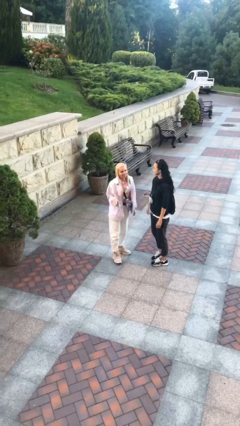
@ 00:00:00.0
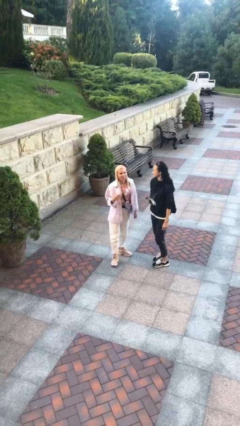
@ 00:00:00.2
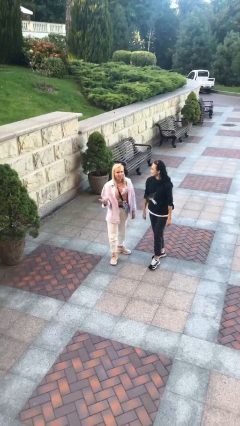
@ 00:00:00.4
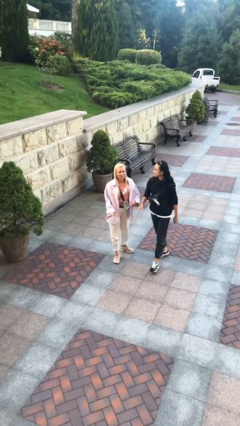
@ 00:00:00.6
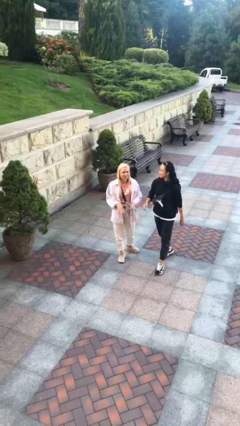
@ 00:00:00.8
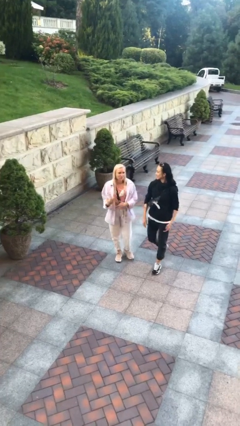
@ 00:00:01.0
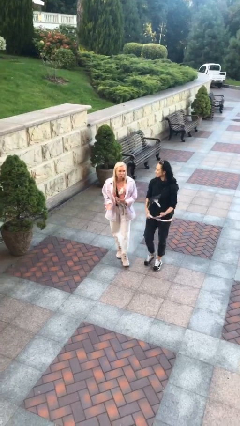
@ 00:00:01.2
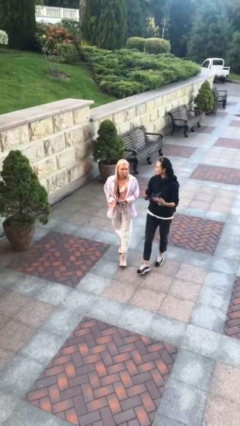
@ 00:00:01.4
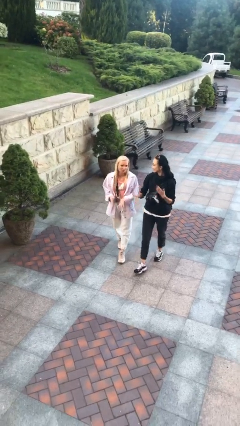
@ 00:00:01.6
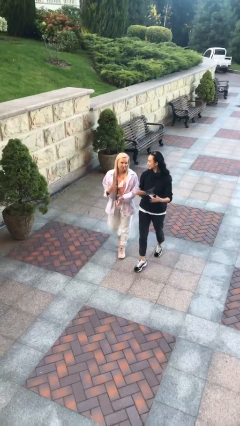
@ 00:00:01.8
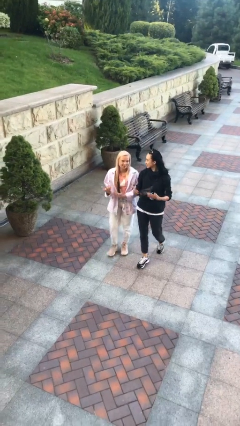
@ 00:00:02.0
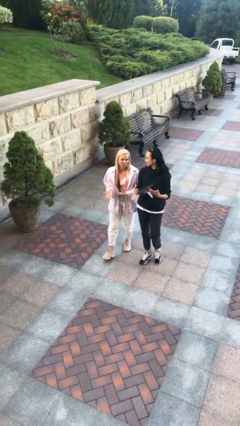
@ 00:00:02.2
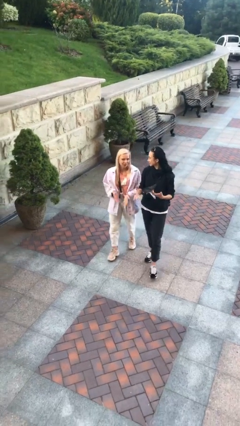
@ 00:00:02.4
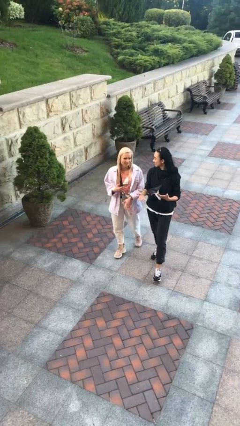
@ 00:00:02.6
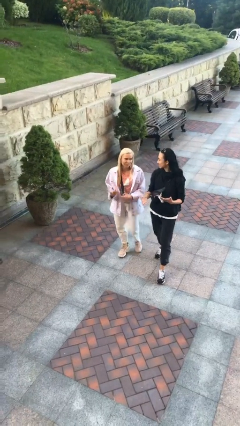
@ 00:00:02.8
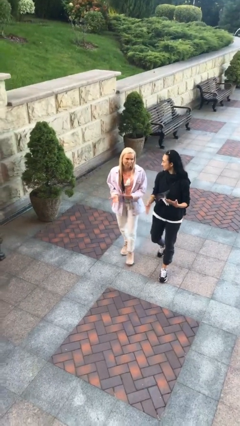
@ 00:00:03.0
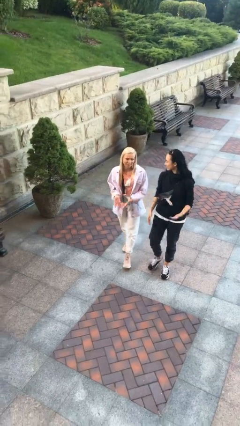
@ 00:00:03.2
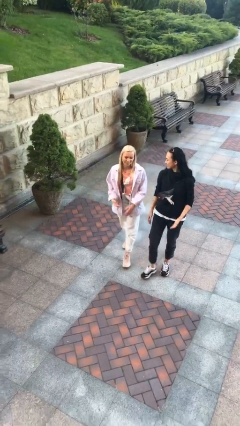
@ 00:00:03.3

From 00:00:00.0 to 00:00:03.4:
person talks to person

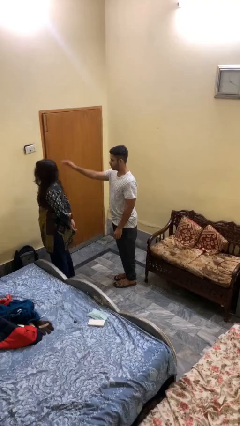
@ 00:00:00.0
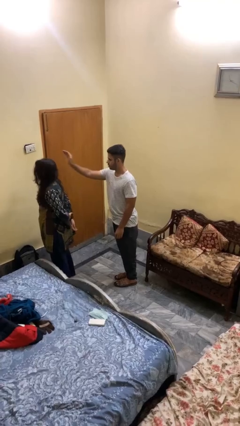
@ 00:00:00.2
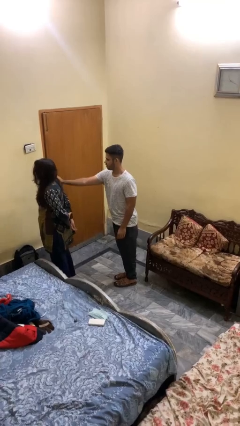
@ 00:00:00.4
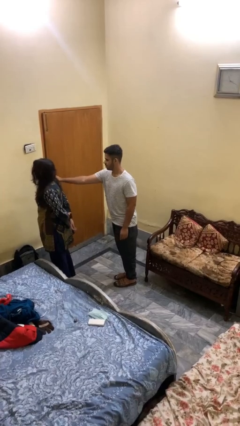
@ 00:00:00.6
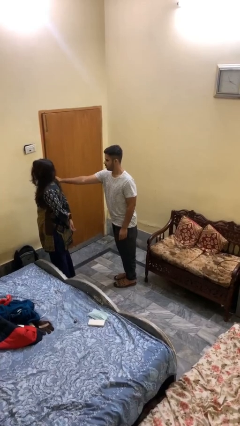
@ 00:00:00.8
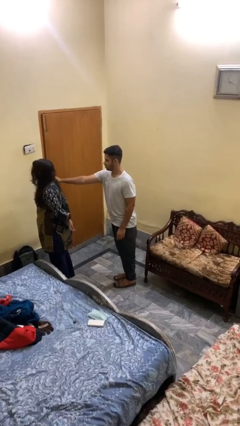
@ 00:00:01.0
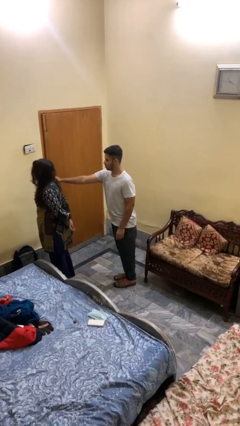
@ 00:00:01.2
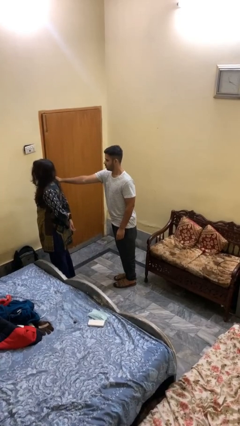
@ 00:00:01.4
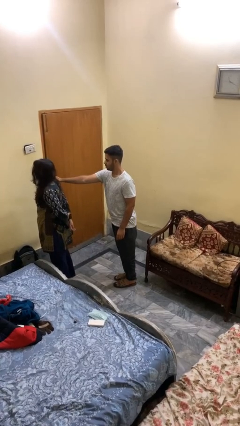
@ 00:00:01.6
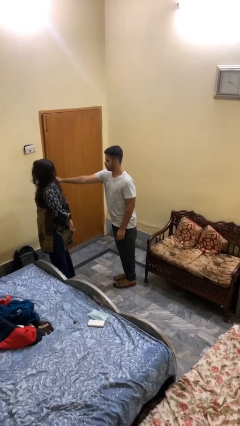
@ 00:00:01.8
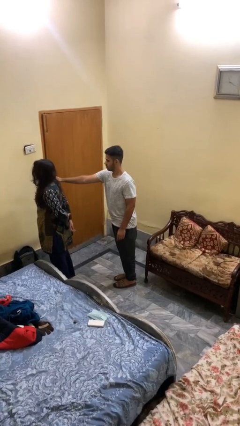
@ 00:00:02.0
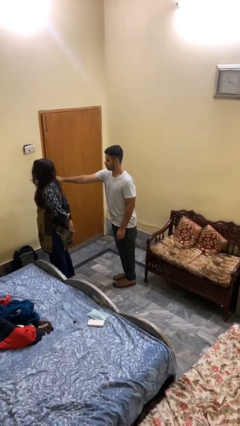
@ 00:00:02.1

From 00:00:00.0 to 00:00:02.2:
person grabs person by shoulder

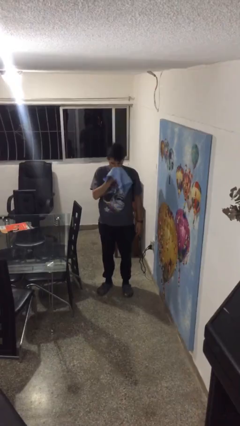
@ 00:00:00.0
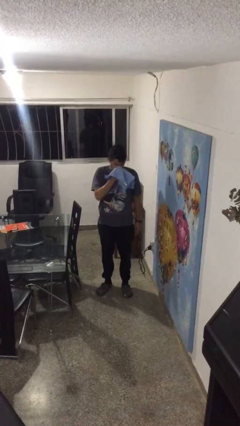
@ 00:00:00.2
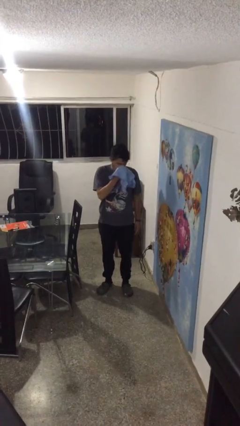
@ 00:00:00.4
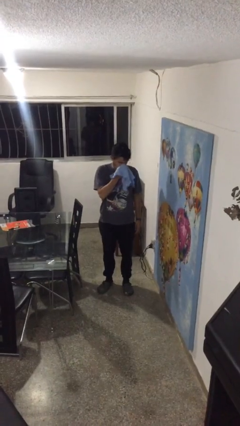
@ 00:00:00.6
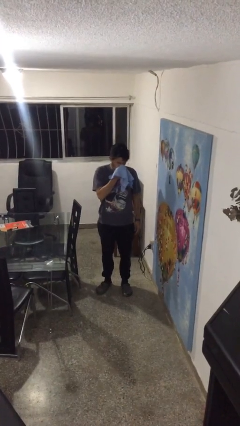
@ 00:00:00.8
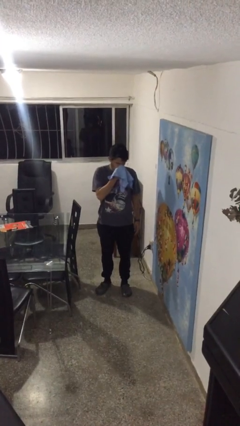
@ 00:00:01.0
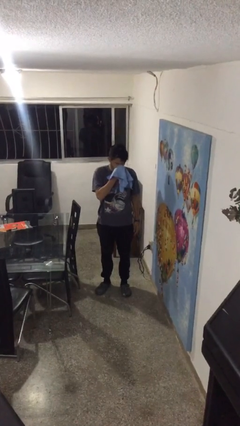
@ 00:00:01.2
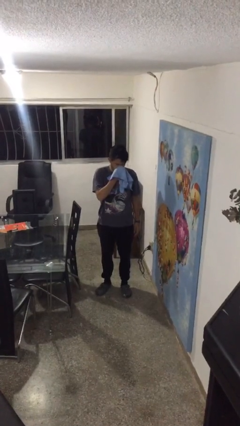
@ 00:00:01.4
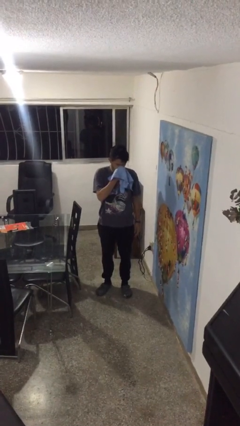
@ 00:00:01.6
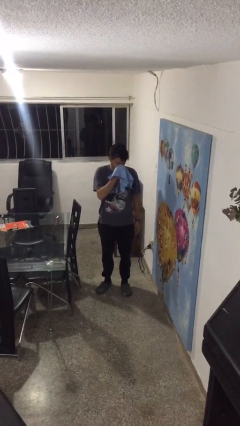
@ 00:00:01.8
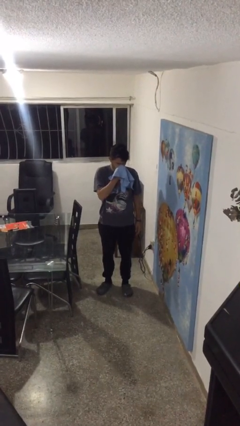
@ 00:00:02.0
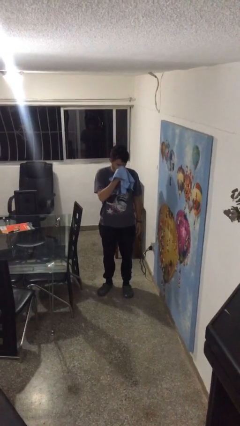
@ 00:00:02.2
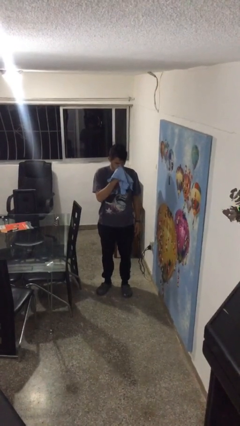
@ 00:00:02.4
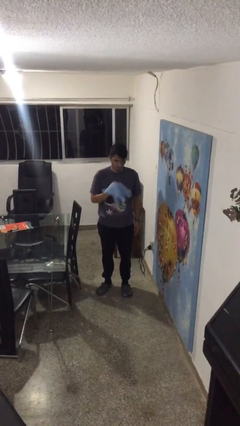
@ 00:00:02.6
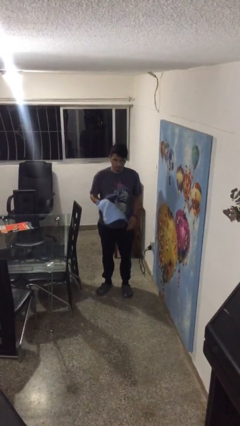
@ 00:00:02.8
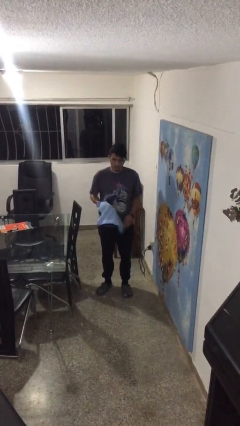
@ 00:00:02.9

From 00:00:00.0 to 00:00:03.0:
person blows nose

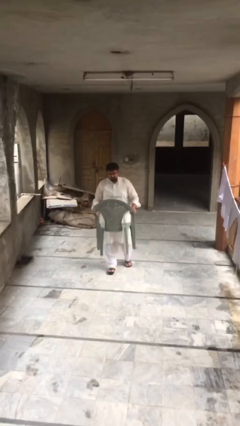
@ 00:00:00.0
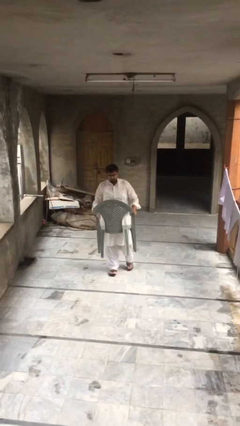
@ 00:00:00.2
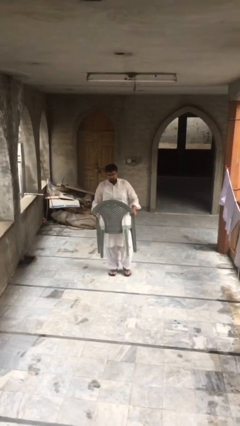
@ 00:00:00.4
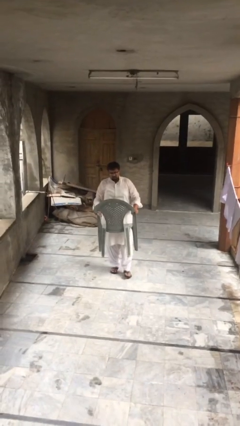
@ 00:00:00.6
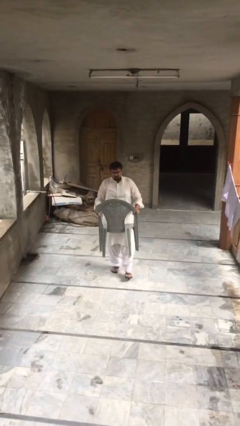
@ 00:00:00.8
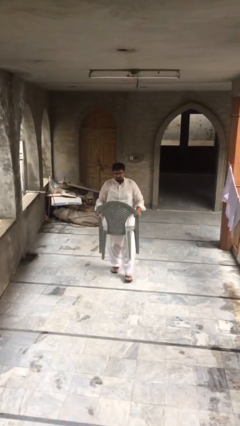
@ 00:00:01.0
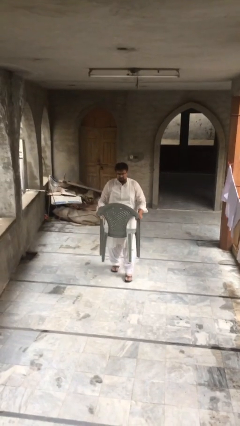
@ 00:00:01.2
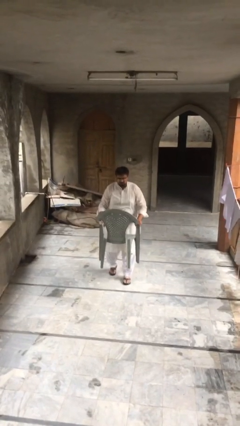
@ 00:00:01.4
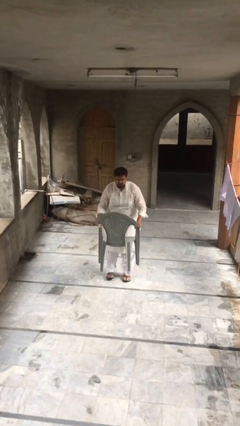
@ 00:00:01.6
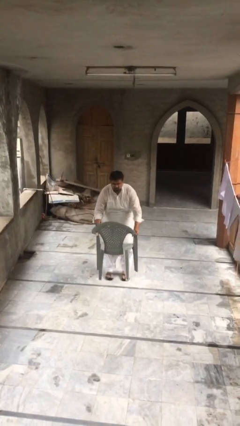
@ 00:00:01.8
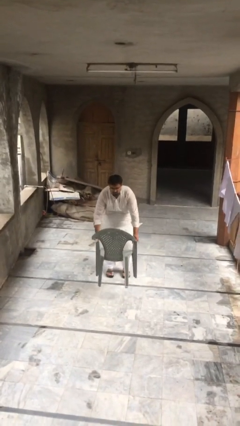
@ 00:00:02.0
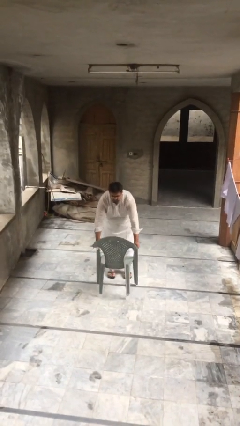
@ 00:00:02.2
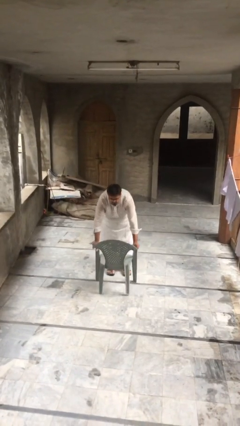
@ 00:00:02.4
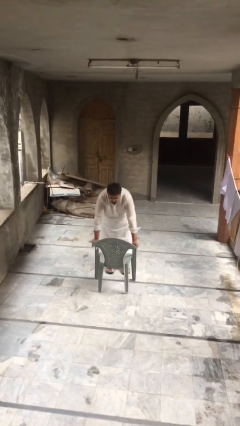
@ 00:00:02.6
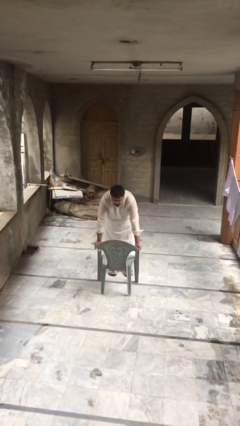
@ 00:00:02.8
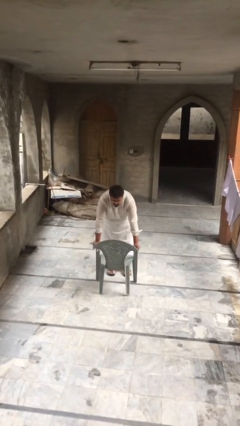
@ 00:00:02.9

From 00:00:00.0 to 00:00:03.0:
person puts down object on floor

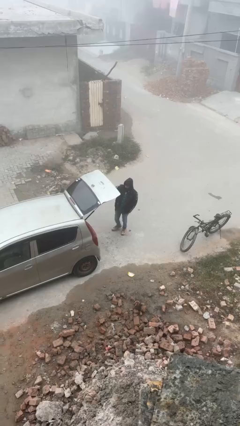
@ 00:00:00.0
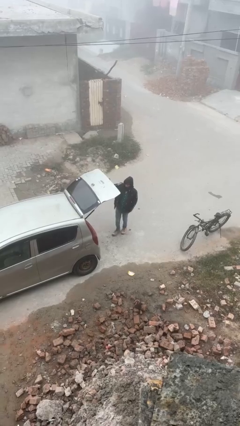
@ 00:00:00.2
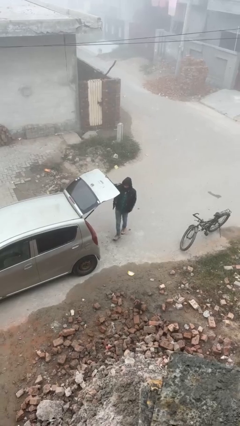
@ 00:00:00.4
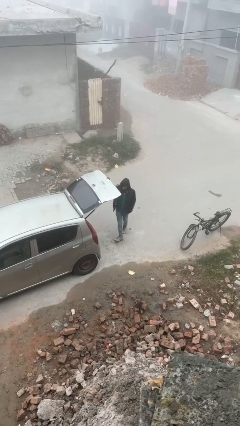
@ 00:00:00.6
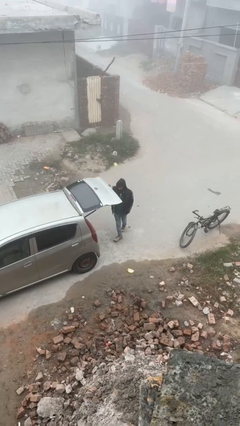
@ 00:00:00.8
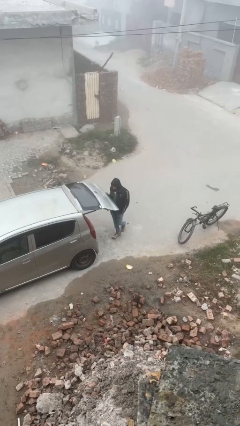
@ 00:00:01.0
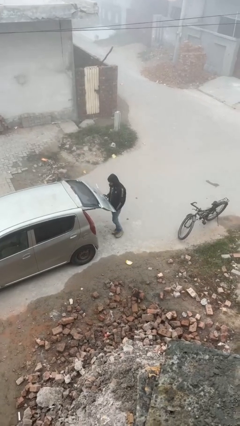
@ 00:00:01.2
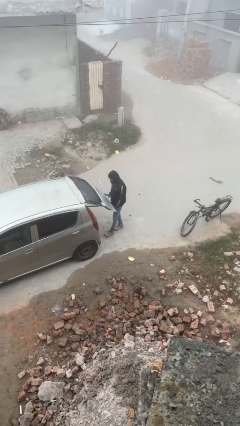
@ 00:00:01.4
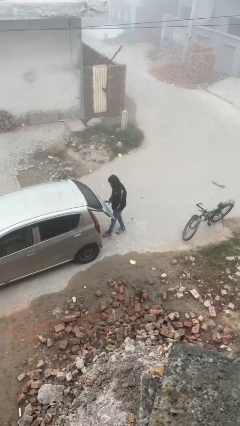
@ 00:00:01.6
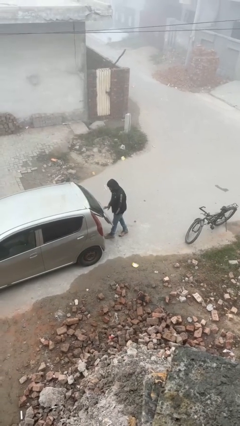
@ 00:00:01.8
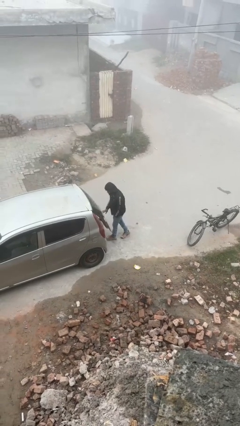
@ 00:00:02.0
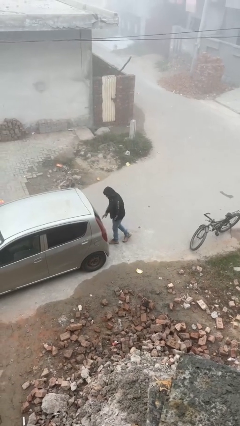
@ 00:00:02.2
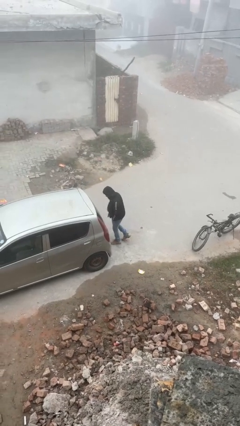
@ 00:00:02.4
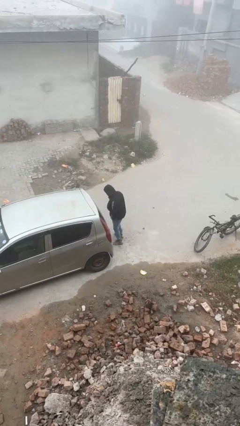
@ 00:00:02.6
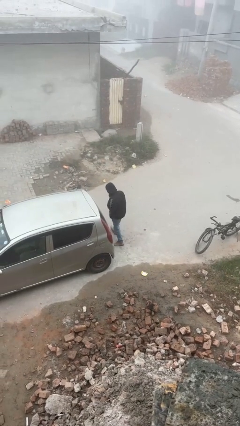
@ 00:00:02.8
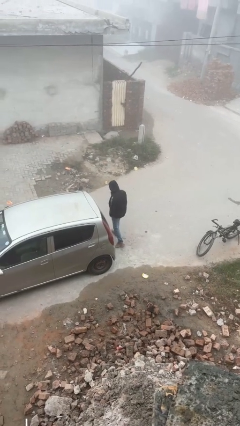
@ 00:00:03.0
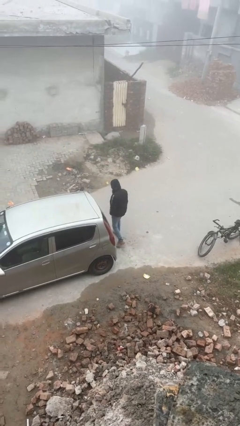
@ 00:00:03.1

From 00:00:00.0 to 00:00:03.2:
person closes car trunk

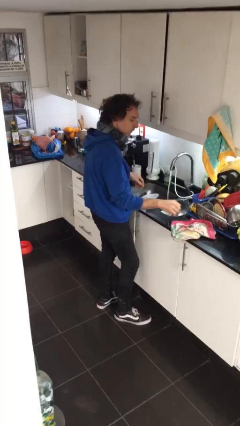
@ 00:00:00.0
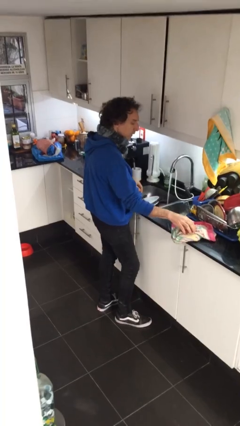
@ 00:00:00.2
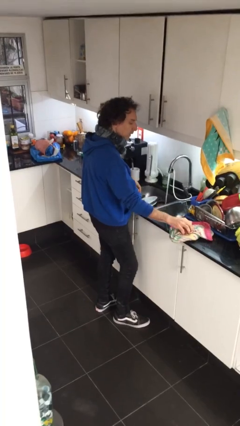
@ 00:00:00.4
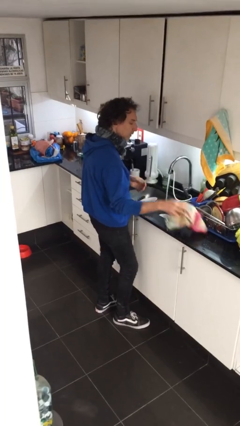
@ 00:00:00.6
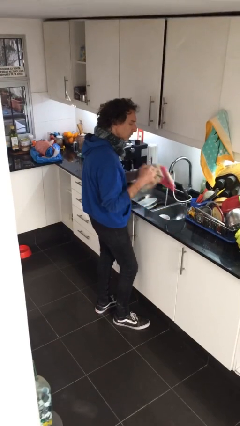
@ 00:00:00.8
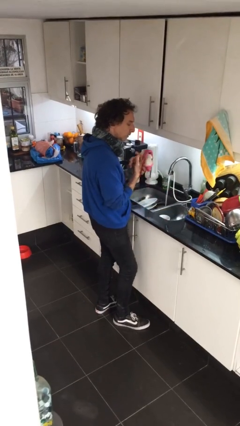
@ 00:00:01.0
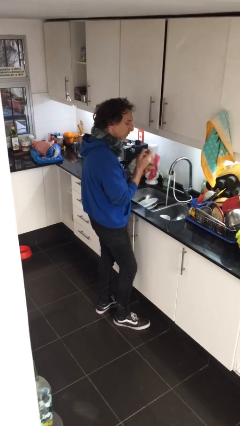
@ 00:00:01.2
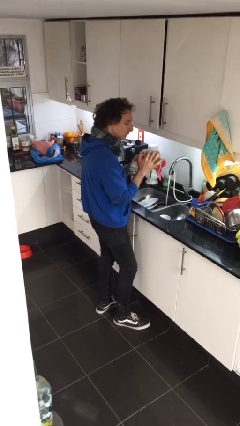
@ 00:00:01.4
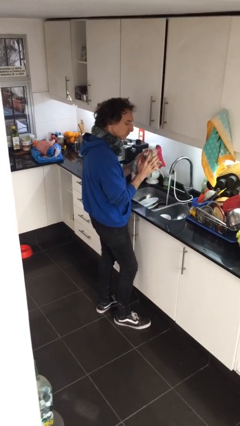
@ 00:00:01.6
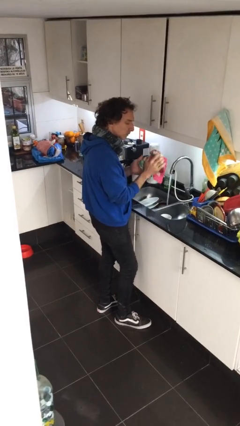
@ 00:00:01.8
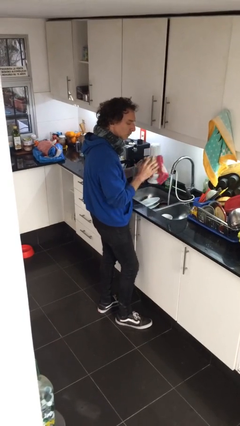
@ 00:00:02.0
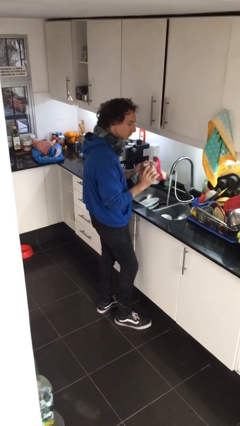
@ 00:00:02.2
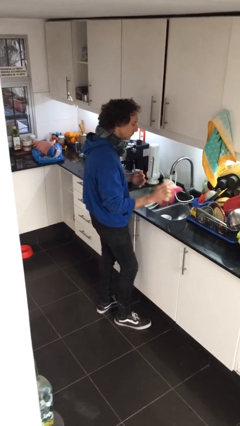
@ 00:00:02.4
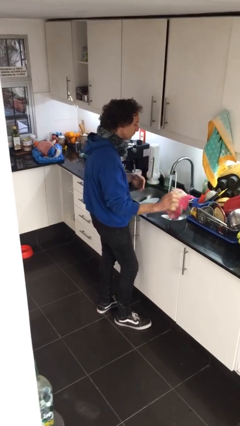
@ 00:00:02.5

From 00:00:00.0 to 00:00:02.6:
person dries hands with towel
